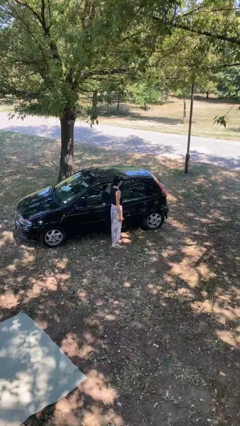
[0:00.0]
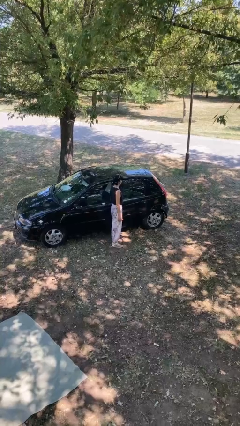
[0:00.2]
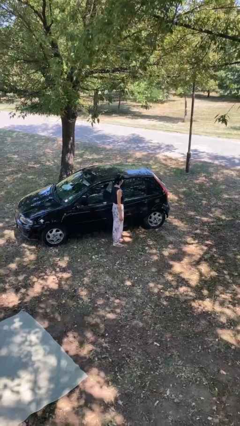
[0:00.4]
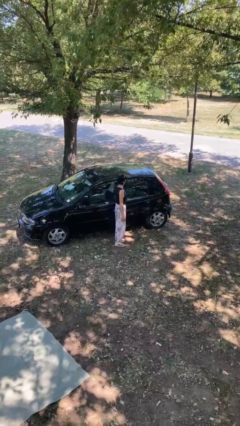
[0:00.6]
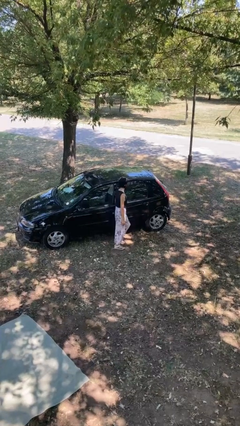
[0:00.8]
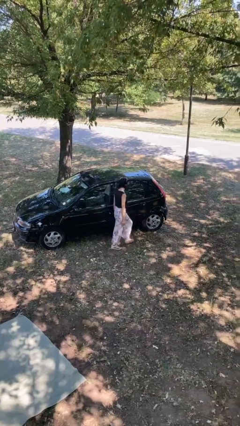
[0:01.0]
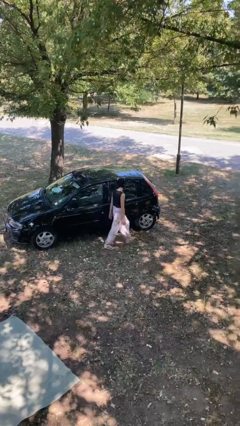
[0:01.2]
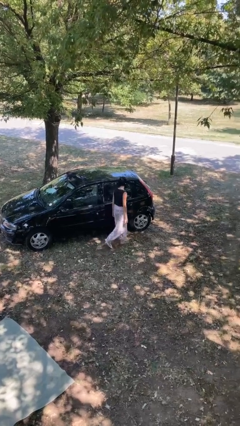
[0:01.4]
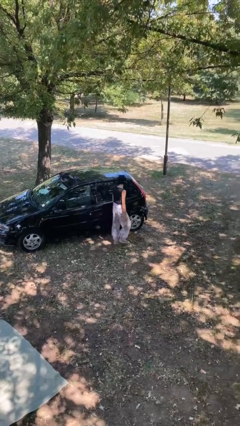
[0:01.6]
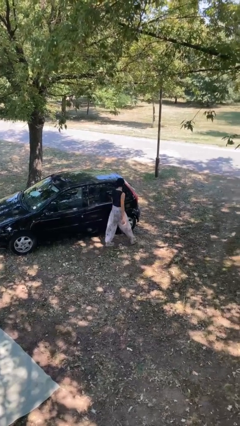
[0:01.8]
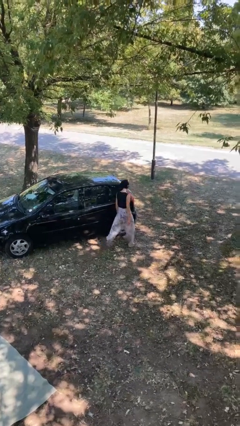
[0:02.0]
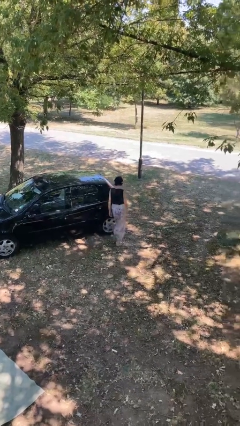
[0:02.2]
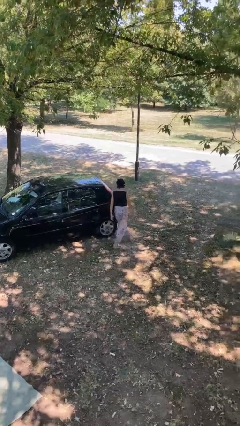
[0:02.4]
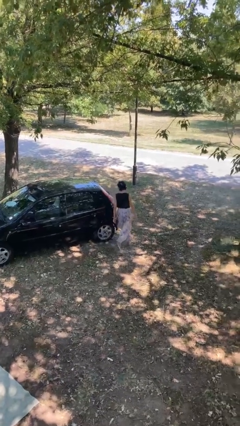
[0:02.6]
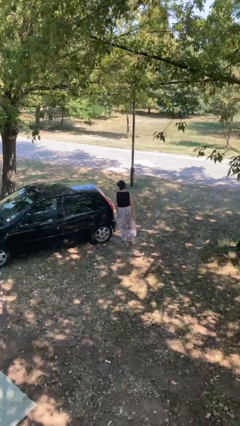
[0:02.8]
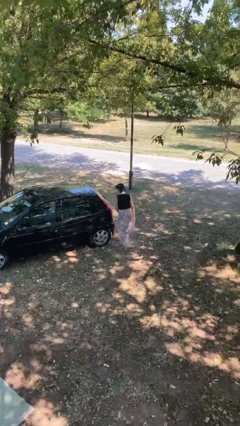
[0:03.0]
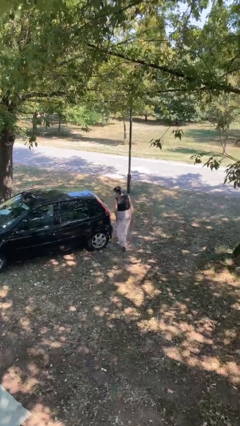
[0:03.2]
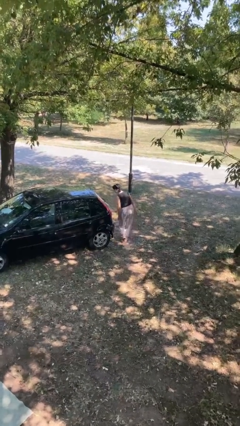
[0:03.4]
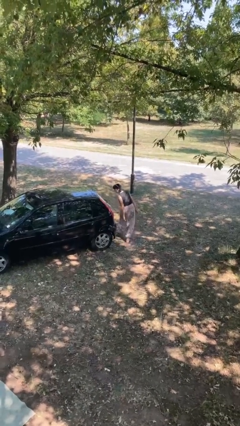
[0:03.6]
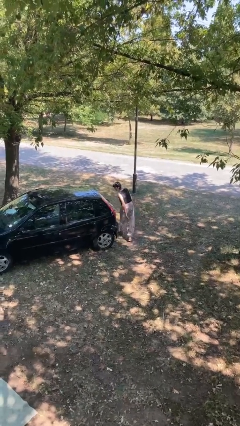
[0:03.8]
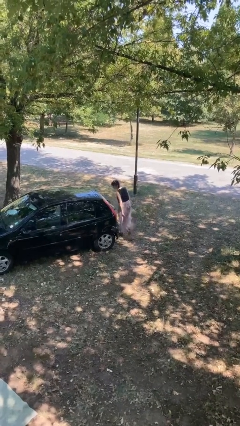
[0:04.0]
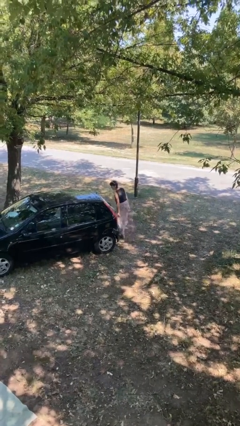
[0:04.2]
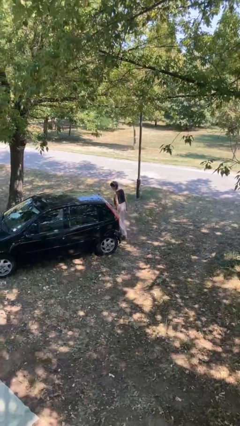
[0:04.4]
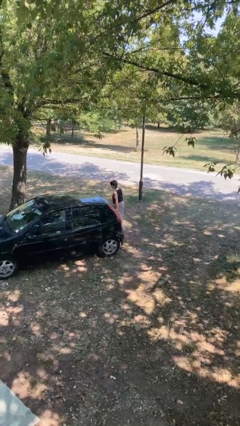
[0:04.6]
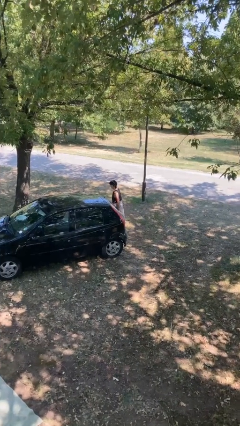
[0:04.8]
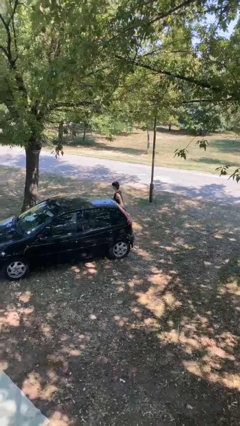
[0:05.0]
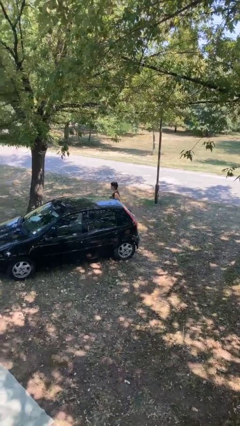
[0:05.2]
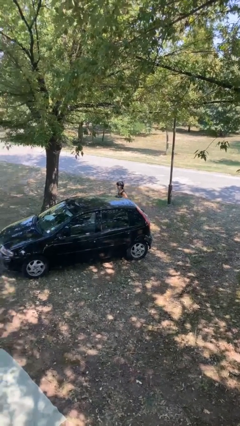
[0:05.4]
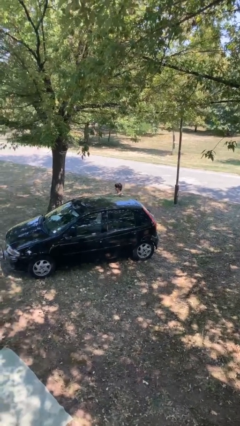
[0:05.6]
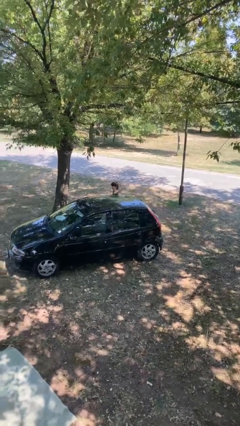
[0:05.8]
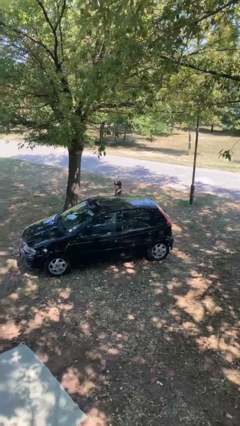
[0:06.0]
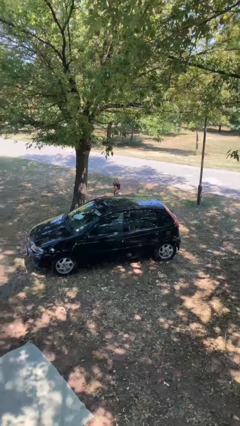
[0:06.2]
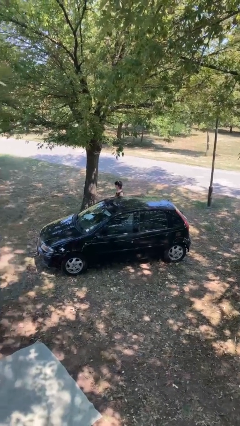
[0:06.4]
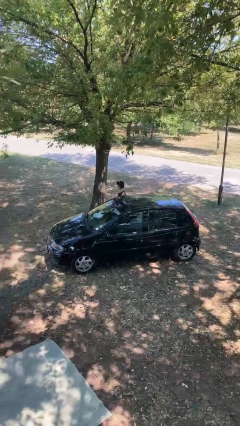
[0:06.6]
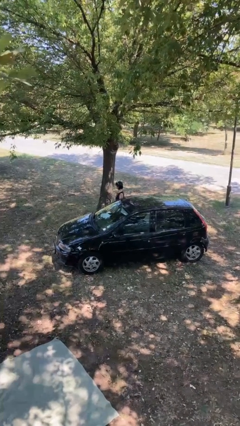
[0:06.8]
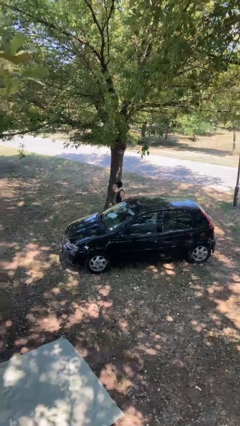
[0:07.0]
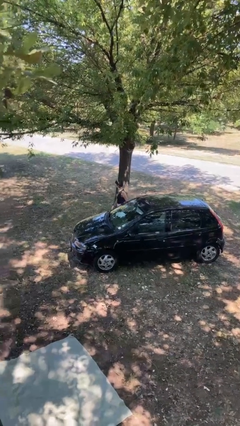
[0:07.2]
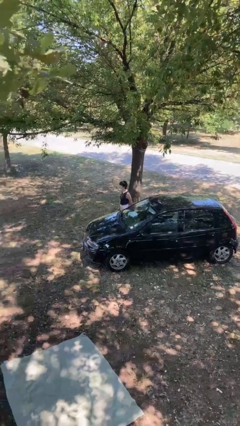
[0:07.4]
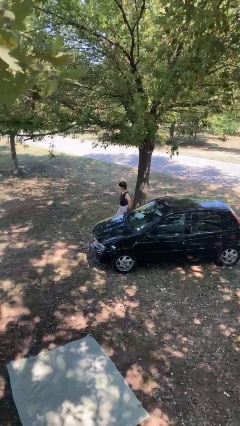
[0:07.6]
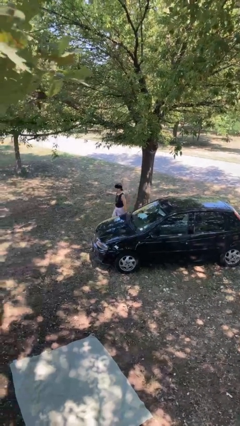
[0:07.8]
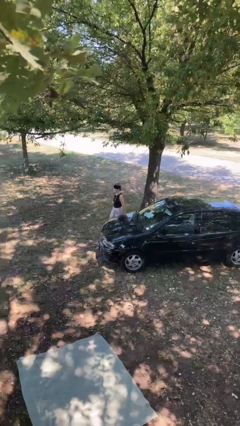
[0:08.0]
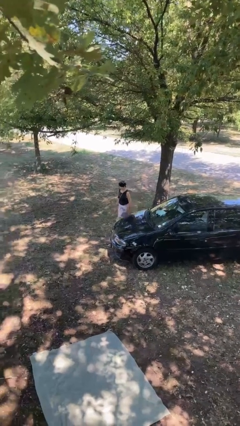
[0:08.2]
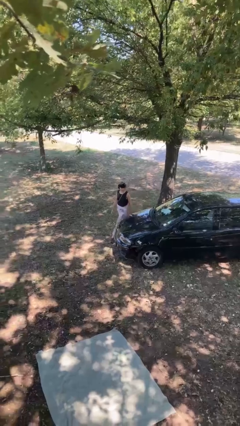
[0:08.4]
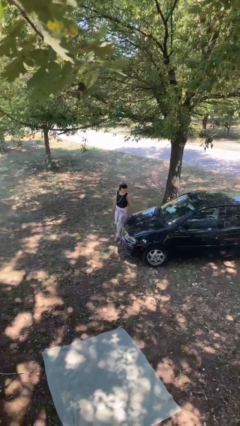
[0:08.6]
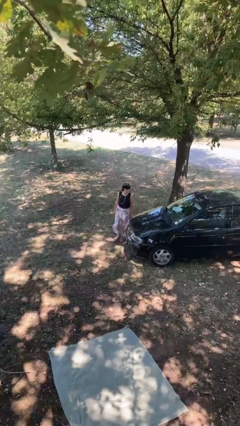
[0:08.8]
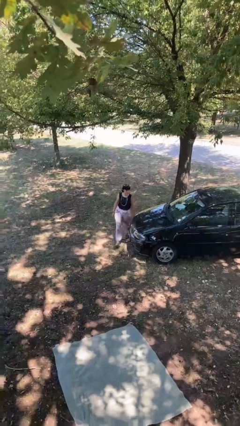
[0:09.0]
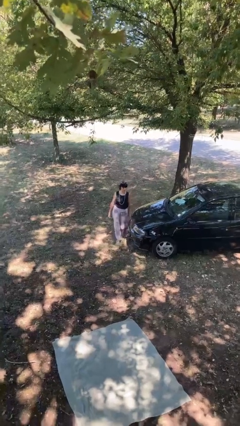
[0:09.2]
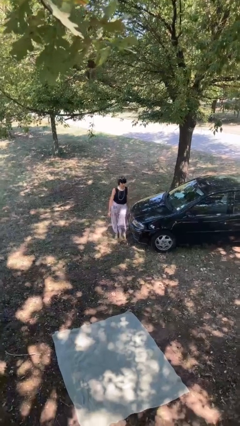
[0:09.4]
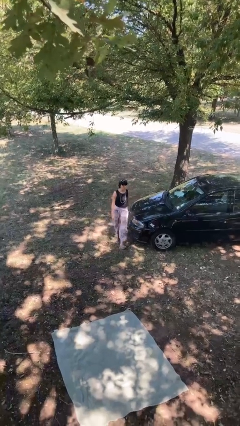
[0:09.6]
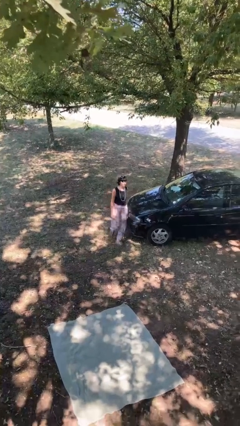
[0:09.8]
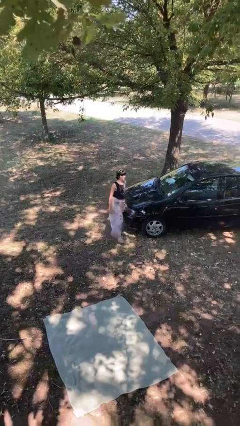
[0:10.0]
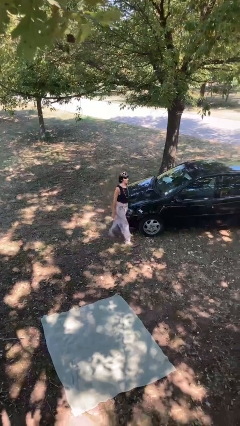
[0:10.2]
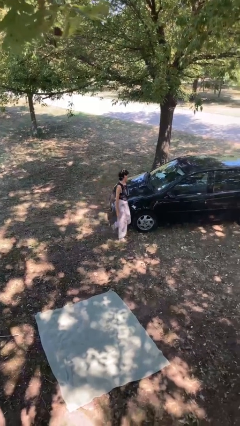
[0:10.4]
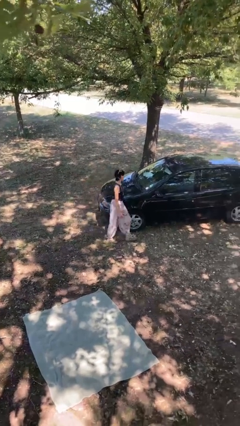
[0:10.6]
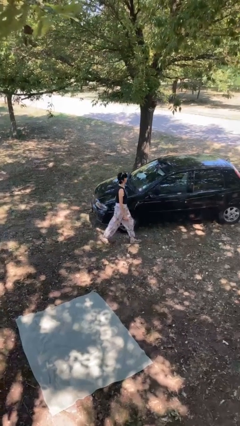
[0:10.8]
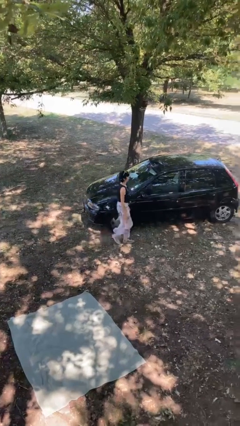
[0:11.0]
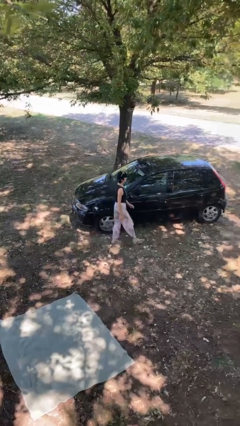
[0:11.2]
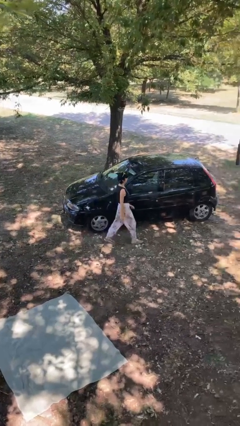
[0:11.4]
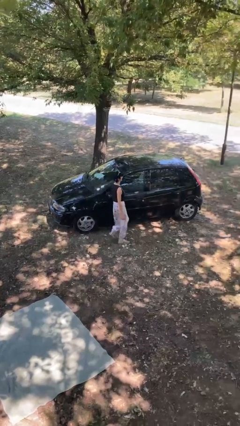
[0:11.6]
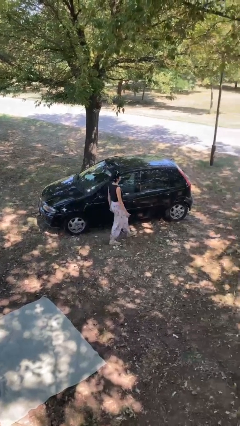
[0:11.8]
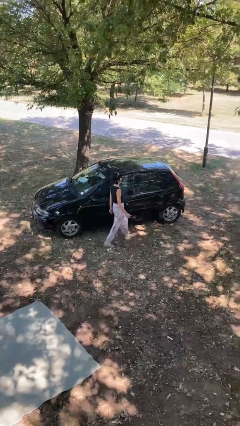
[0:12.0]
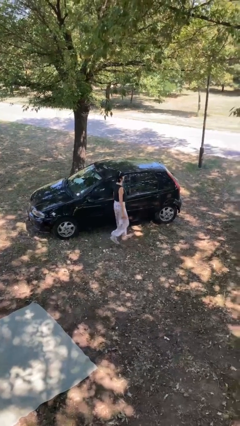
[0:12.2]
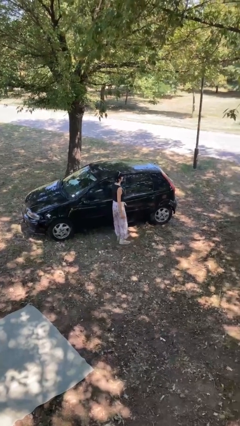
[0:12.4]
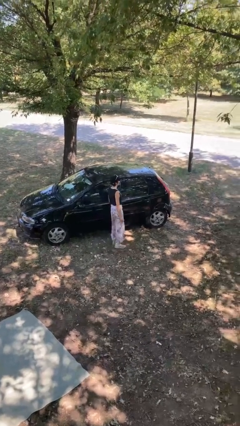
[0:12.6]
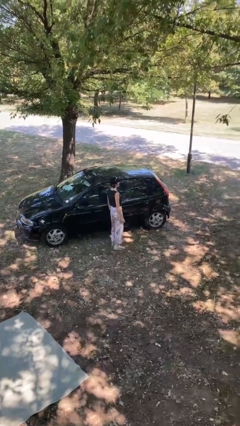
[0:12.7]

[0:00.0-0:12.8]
person walks around car

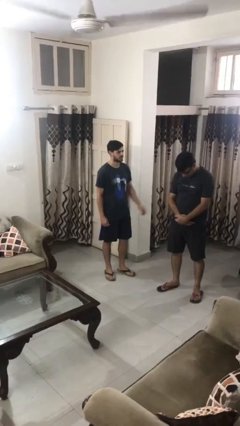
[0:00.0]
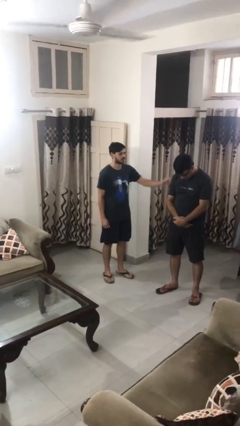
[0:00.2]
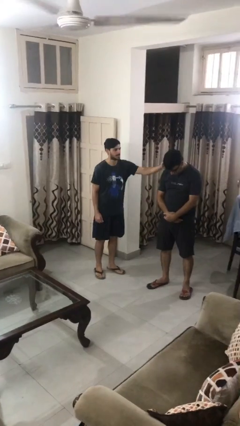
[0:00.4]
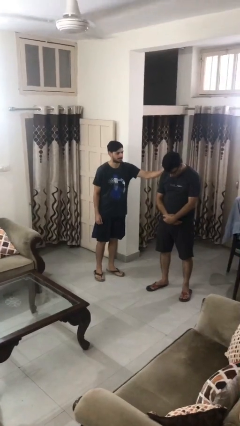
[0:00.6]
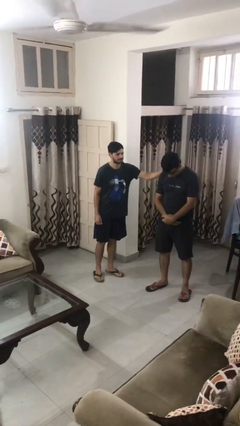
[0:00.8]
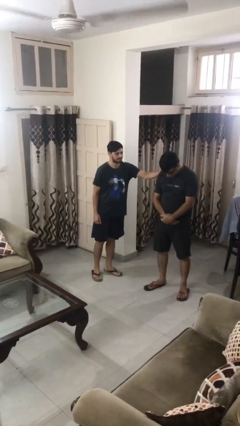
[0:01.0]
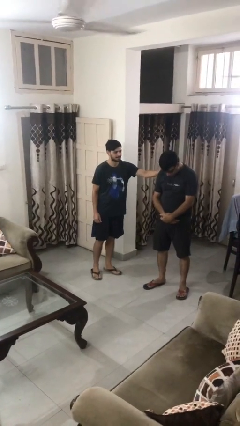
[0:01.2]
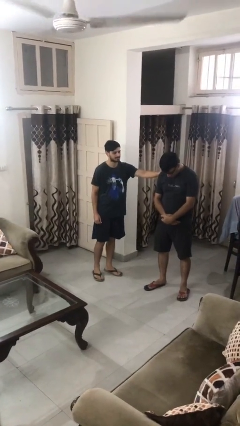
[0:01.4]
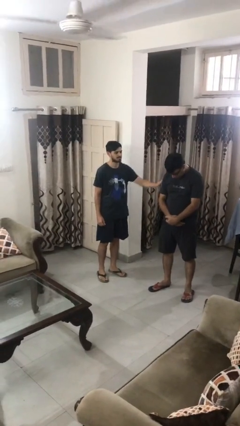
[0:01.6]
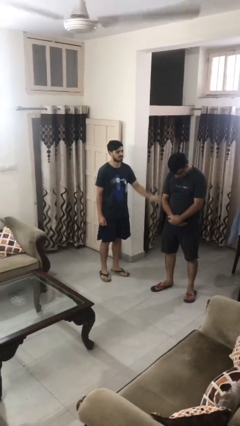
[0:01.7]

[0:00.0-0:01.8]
person pounds shoulders of person

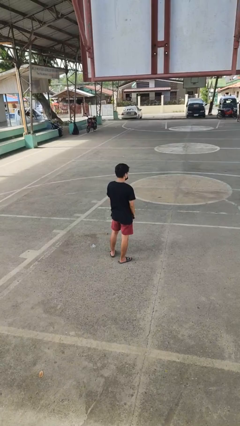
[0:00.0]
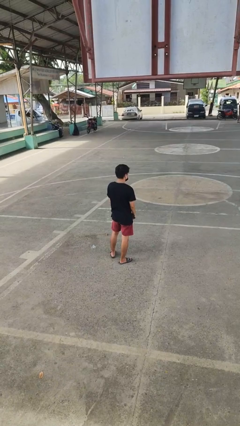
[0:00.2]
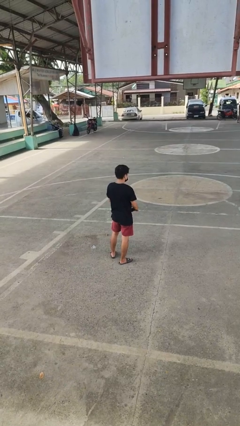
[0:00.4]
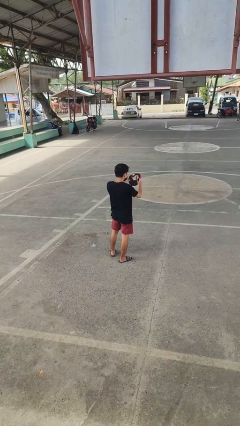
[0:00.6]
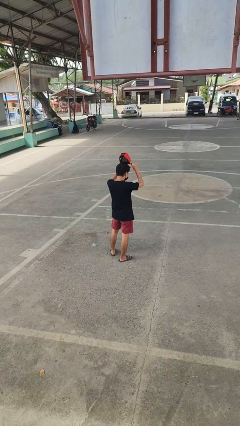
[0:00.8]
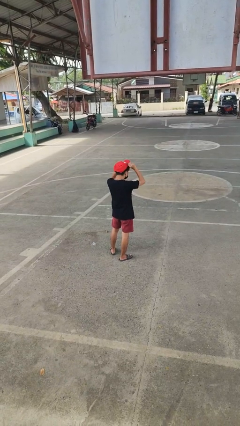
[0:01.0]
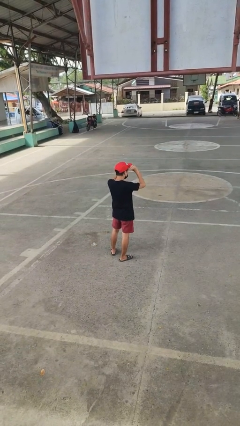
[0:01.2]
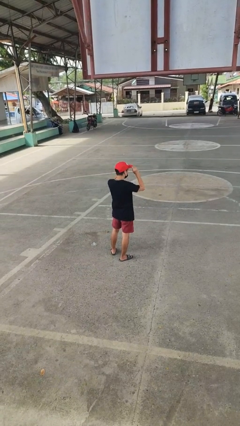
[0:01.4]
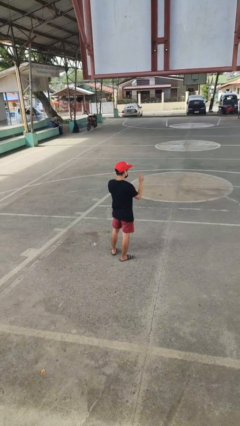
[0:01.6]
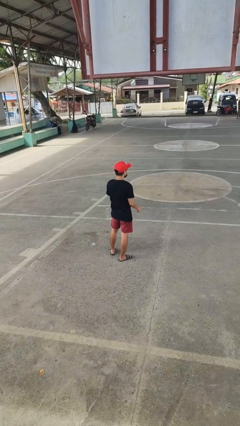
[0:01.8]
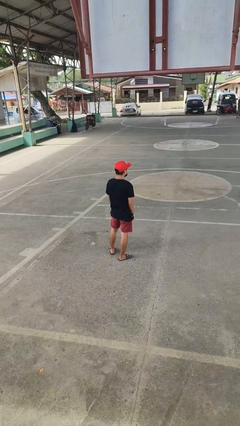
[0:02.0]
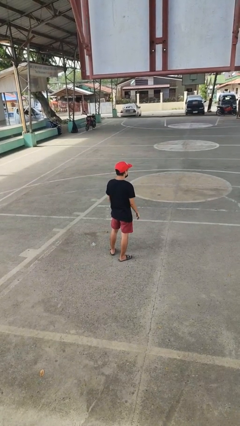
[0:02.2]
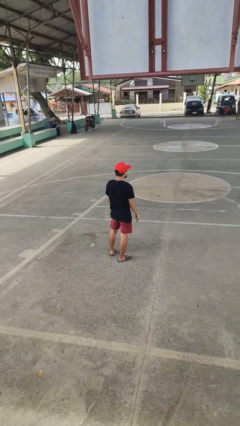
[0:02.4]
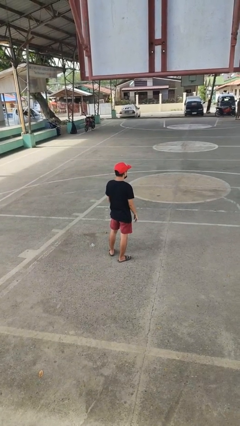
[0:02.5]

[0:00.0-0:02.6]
person puts on hat

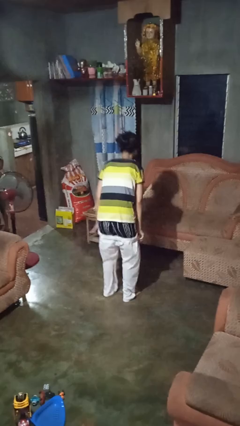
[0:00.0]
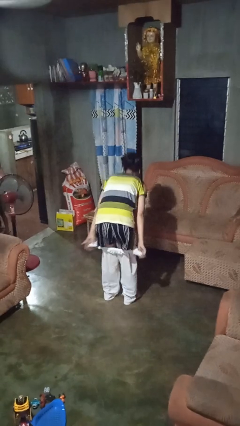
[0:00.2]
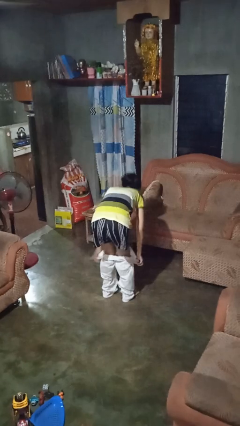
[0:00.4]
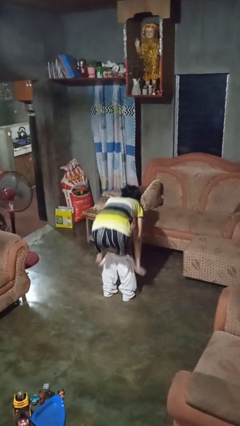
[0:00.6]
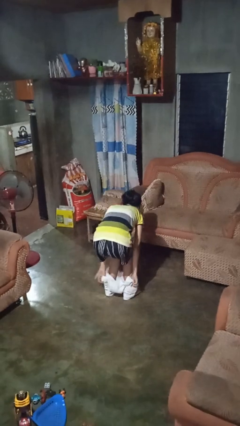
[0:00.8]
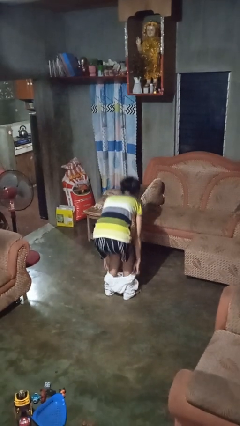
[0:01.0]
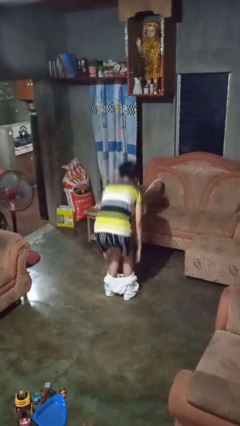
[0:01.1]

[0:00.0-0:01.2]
person takes off pants
